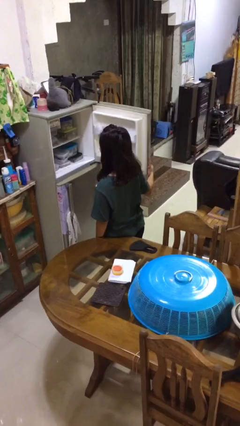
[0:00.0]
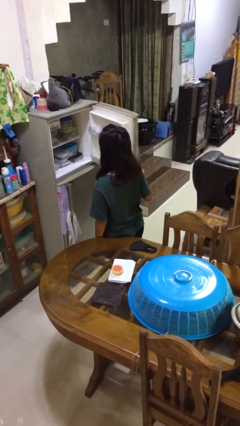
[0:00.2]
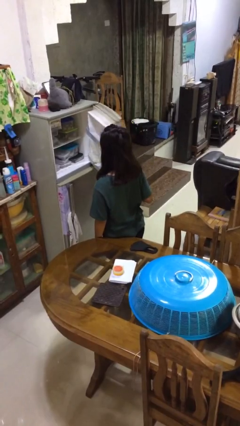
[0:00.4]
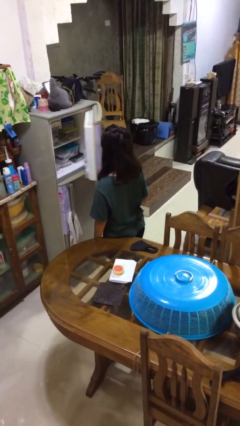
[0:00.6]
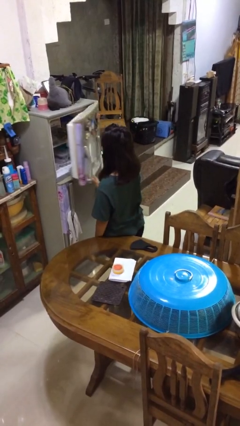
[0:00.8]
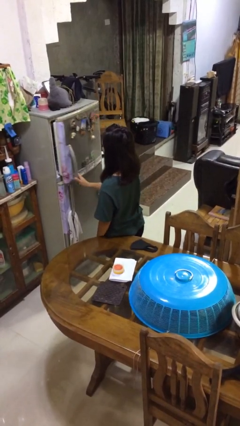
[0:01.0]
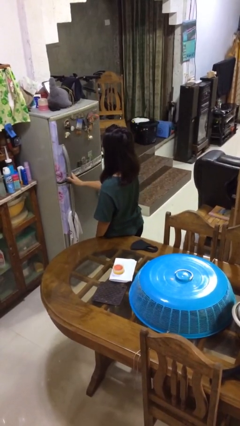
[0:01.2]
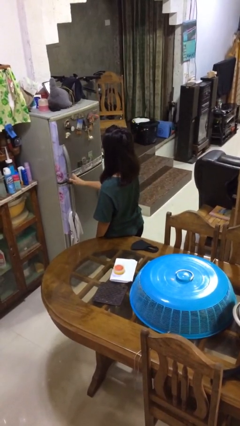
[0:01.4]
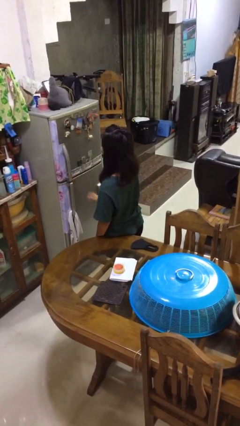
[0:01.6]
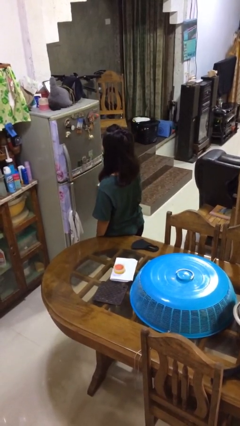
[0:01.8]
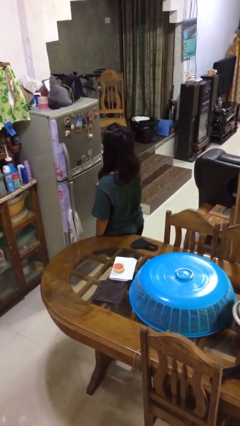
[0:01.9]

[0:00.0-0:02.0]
person closes refrigerator

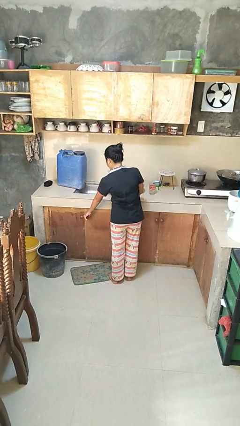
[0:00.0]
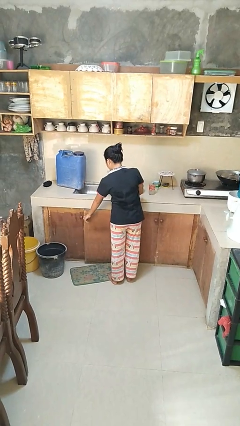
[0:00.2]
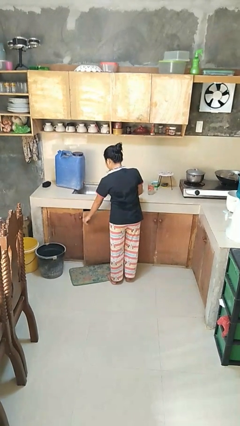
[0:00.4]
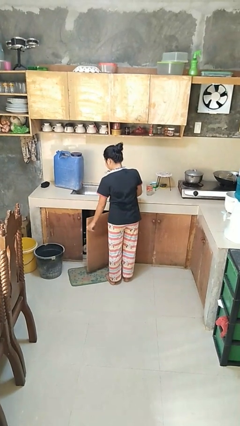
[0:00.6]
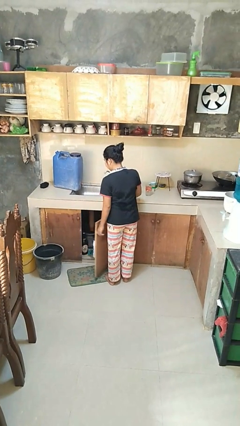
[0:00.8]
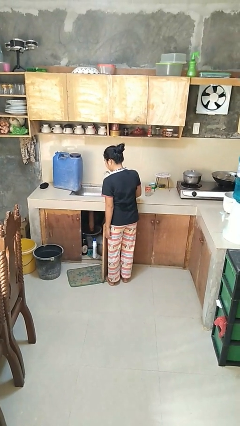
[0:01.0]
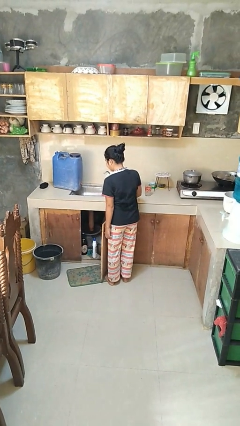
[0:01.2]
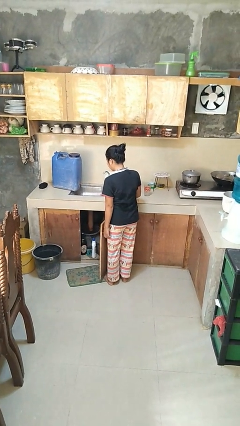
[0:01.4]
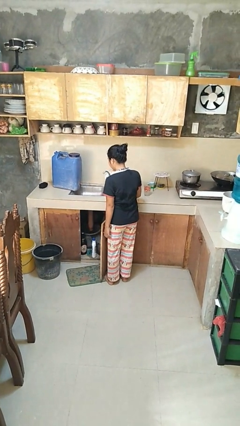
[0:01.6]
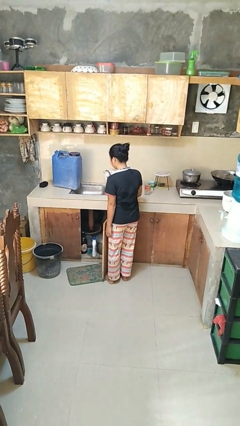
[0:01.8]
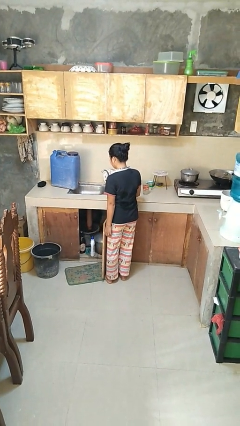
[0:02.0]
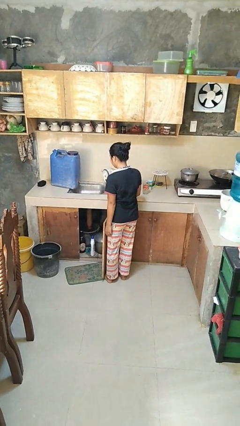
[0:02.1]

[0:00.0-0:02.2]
person opens cabinet

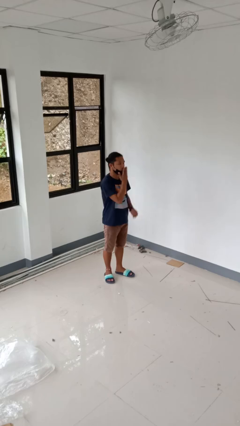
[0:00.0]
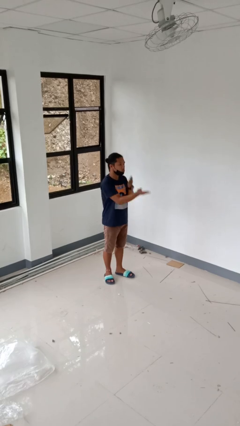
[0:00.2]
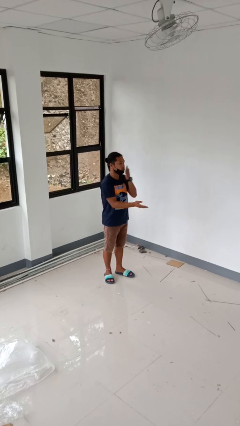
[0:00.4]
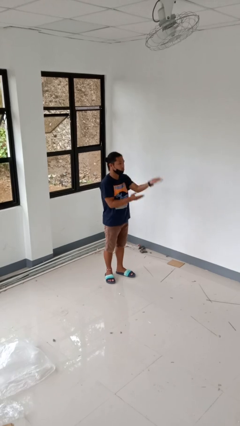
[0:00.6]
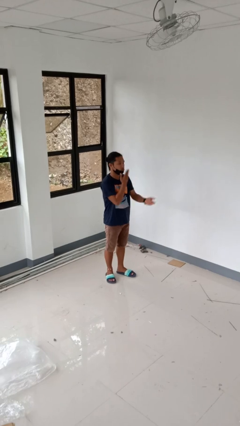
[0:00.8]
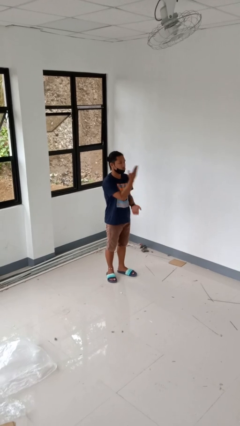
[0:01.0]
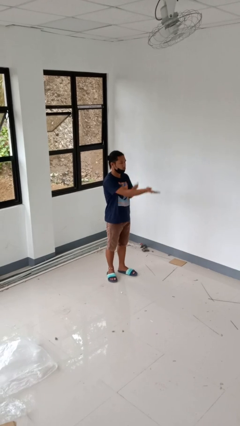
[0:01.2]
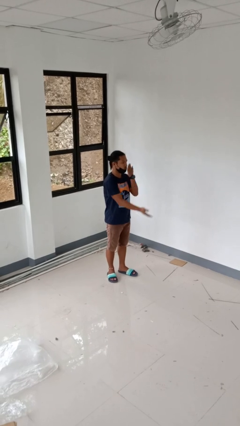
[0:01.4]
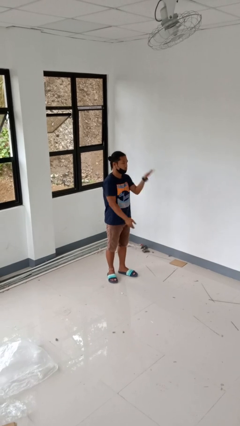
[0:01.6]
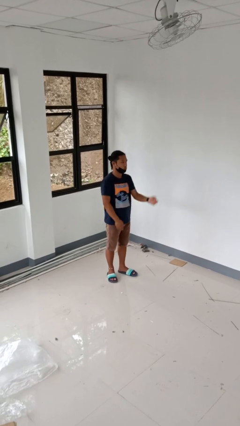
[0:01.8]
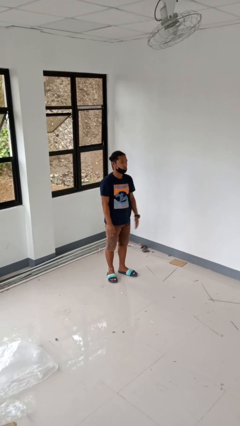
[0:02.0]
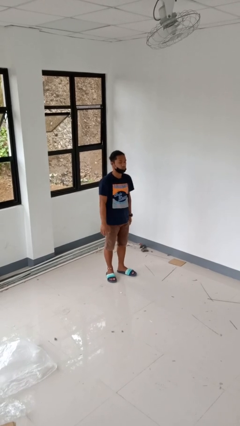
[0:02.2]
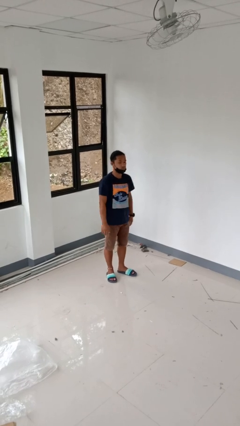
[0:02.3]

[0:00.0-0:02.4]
person gestures blow kiss

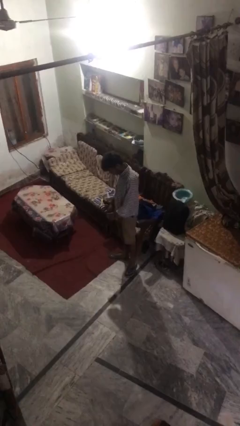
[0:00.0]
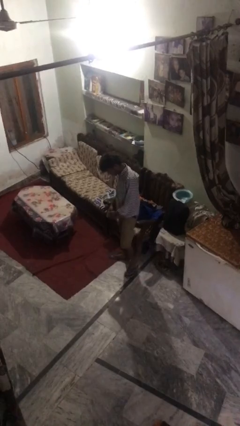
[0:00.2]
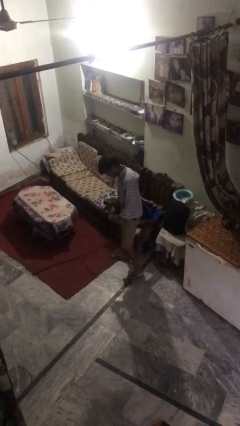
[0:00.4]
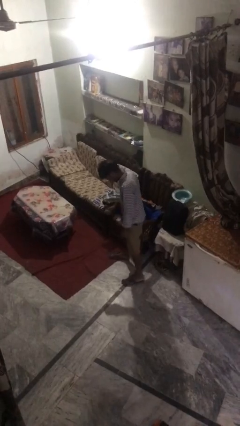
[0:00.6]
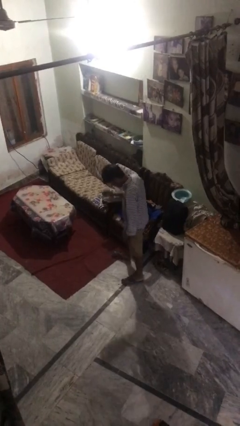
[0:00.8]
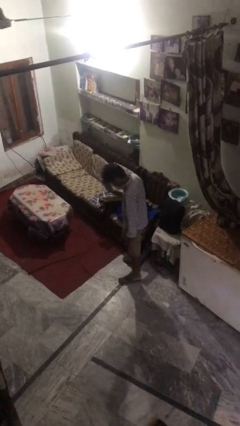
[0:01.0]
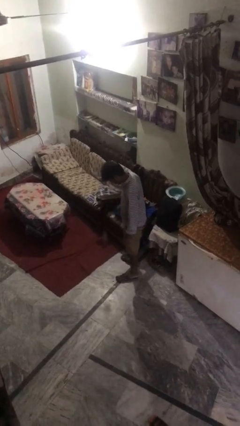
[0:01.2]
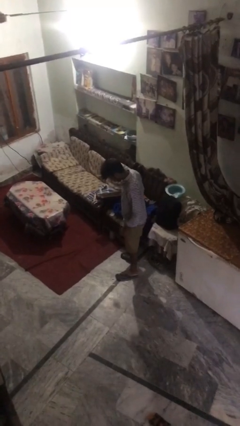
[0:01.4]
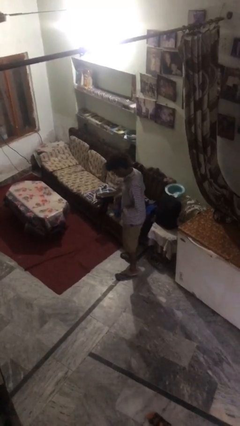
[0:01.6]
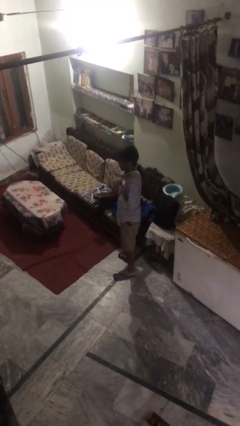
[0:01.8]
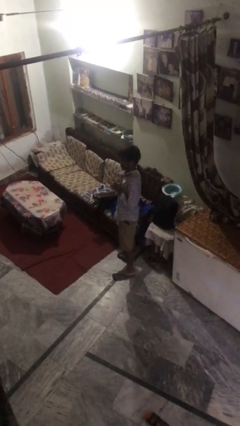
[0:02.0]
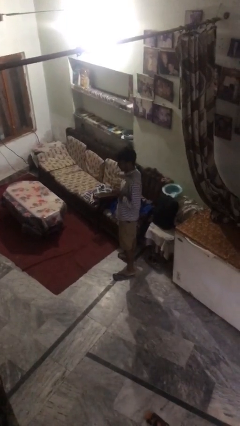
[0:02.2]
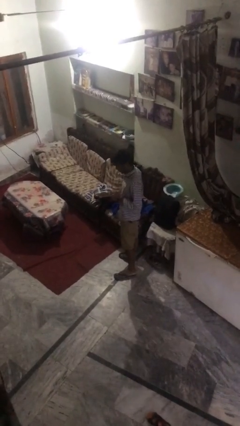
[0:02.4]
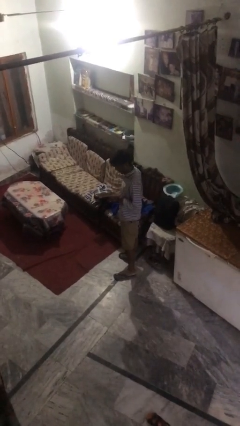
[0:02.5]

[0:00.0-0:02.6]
person bounces ball on floor

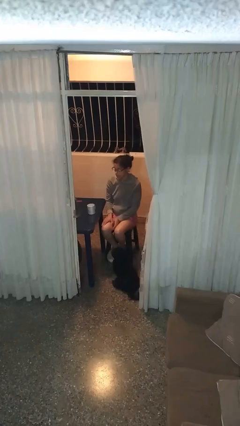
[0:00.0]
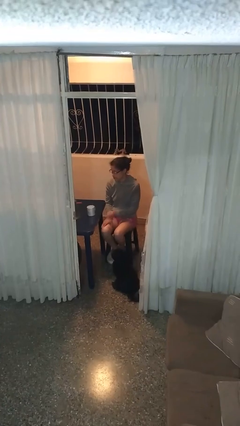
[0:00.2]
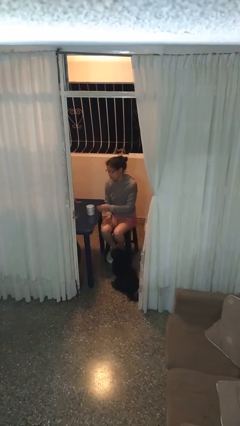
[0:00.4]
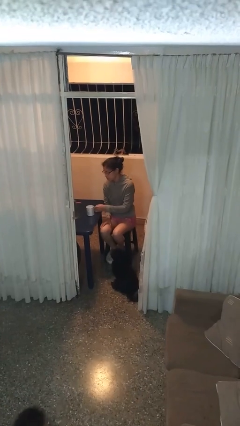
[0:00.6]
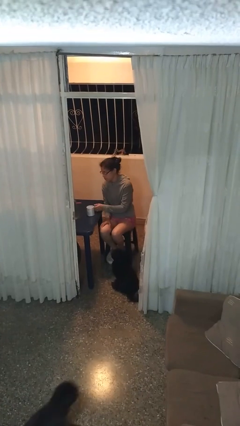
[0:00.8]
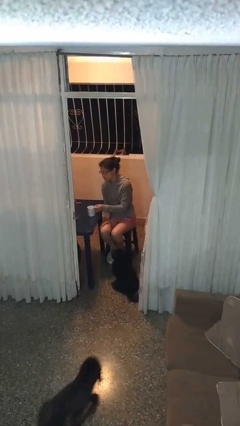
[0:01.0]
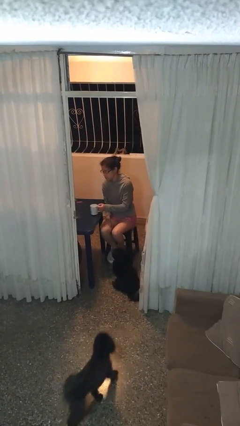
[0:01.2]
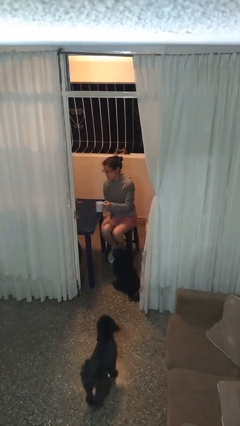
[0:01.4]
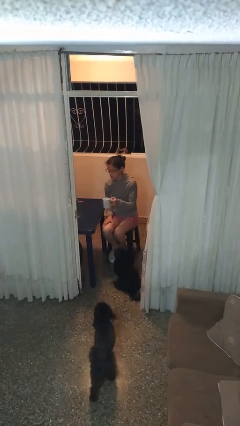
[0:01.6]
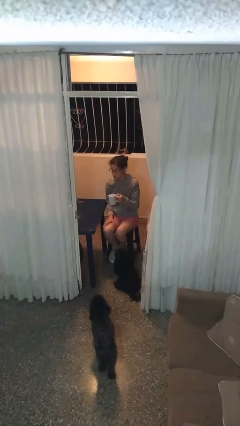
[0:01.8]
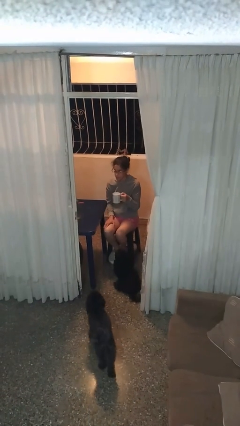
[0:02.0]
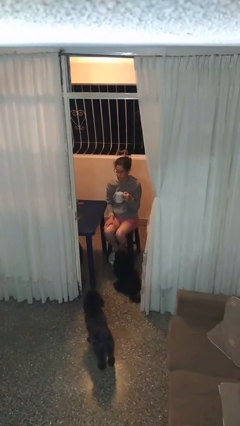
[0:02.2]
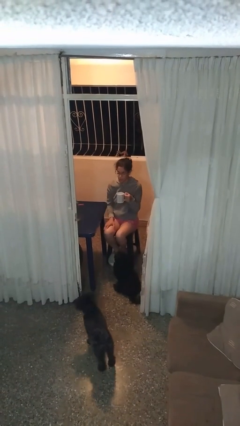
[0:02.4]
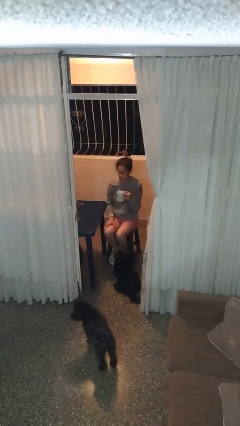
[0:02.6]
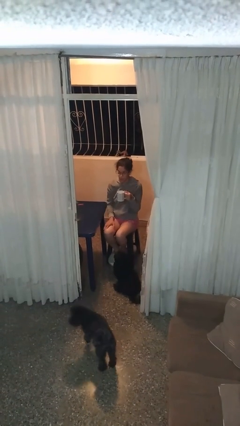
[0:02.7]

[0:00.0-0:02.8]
person picks up object from table

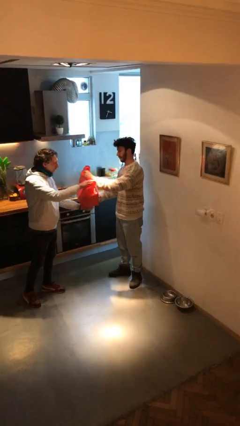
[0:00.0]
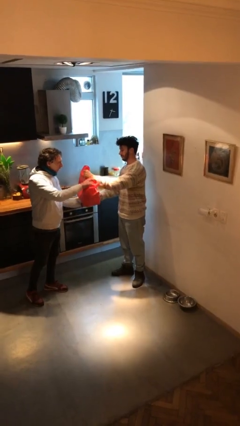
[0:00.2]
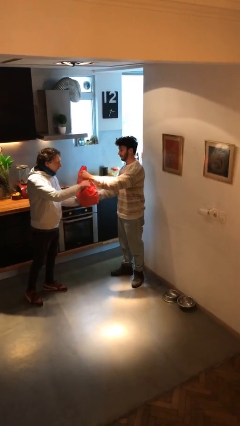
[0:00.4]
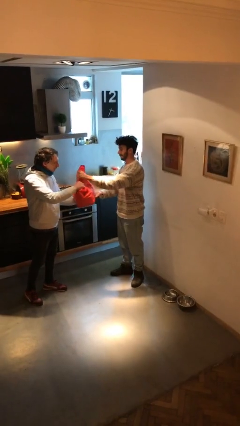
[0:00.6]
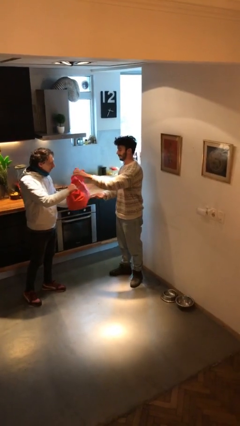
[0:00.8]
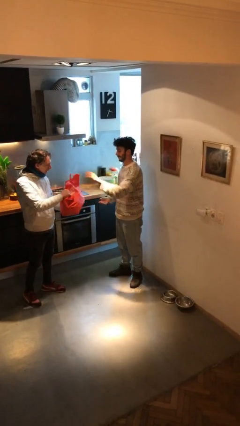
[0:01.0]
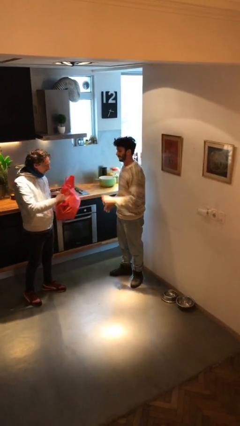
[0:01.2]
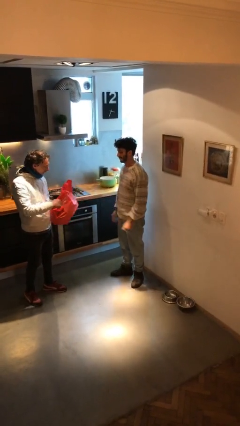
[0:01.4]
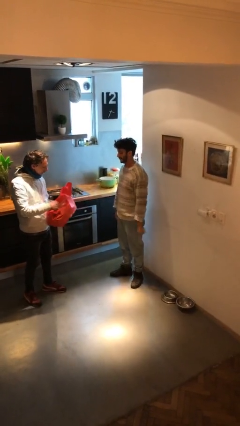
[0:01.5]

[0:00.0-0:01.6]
person transfers object to person

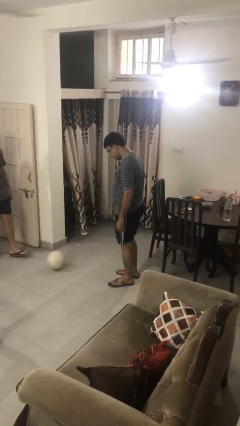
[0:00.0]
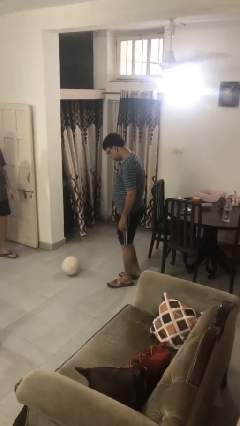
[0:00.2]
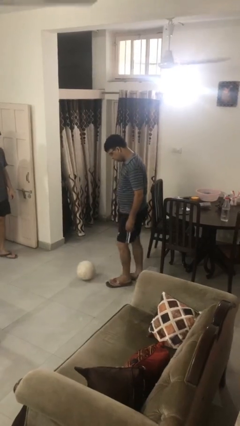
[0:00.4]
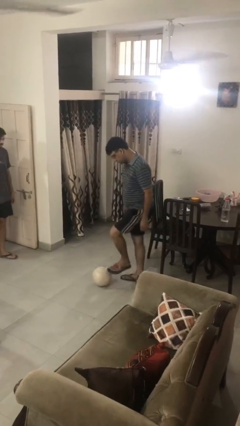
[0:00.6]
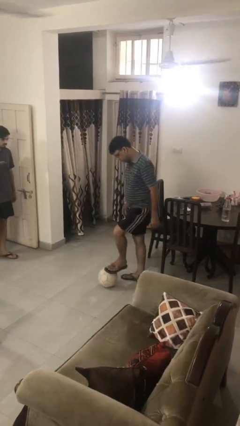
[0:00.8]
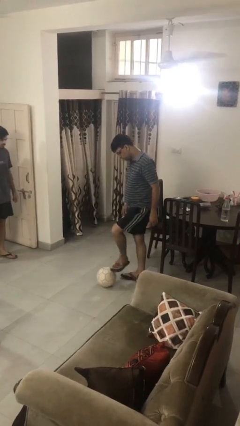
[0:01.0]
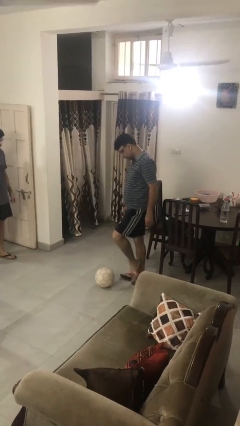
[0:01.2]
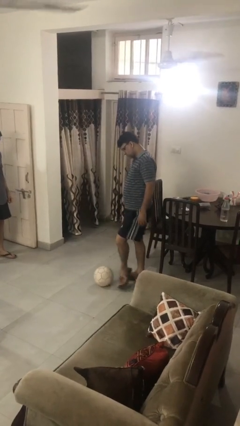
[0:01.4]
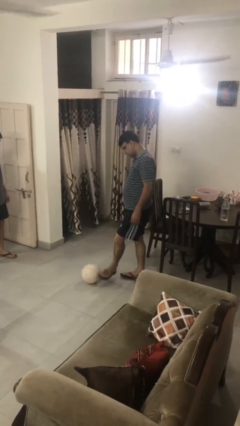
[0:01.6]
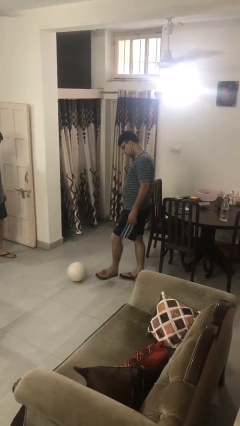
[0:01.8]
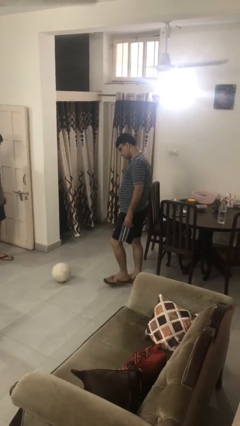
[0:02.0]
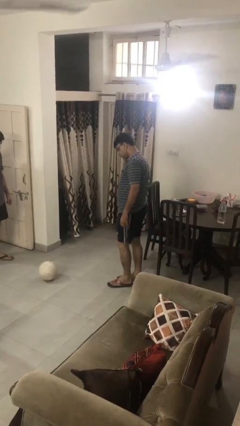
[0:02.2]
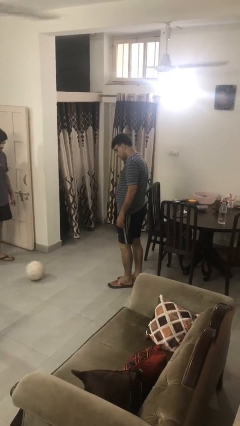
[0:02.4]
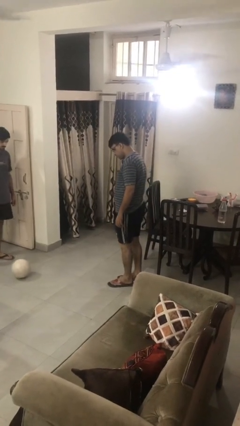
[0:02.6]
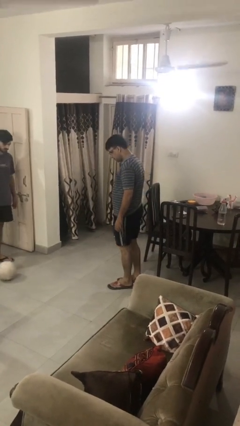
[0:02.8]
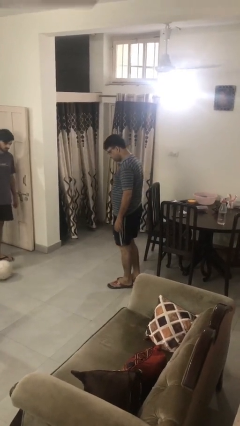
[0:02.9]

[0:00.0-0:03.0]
person kicks object to person
